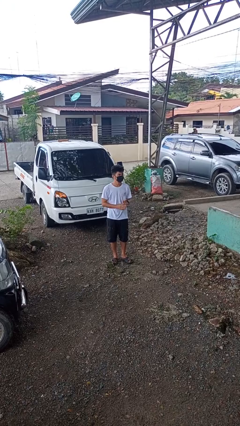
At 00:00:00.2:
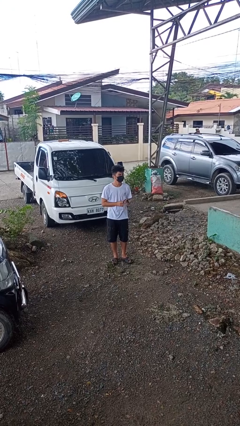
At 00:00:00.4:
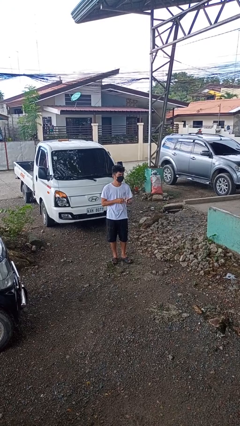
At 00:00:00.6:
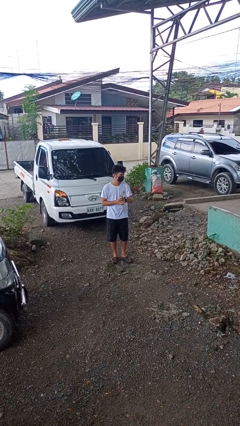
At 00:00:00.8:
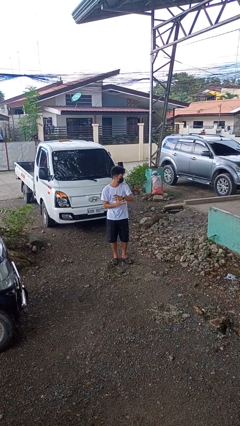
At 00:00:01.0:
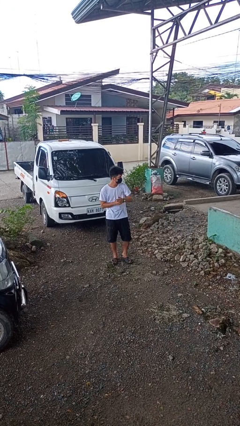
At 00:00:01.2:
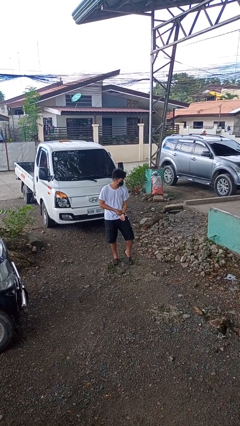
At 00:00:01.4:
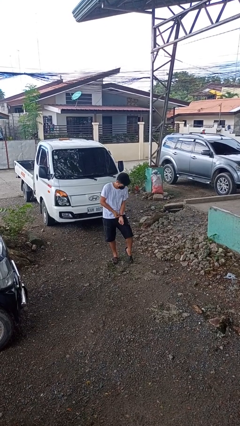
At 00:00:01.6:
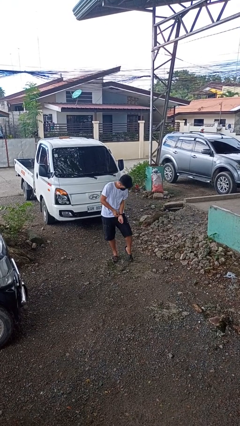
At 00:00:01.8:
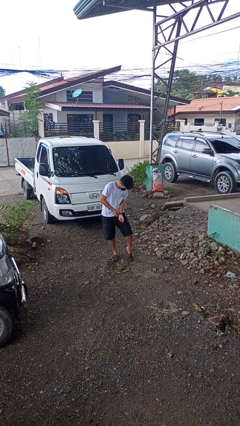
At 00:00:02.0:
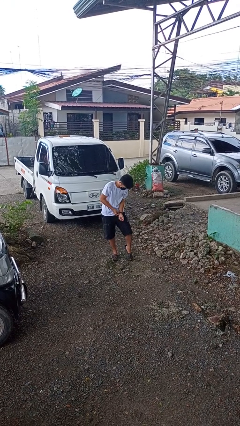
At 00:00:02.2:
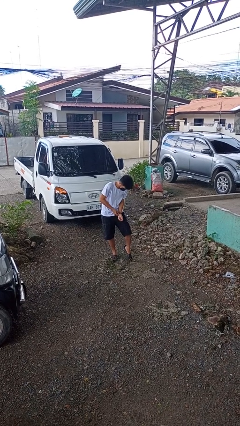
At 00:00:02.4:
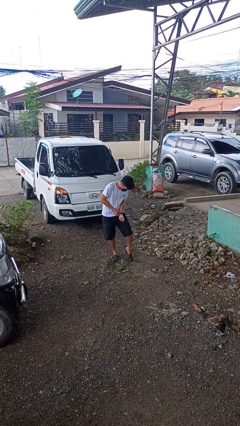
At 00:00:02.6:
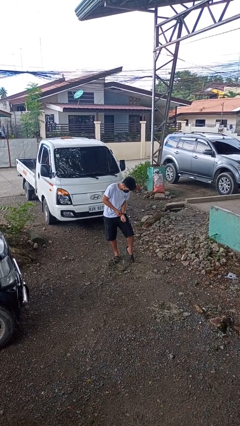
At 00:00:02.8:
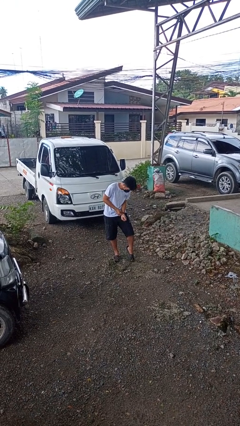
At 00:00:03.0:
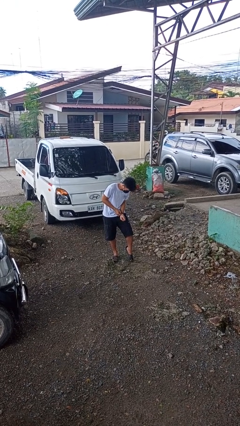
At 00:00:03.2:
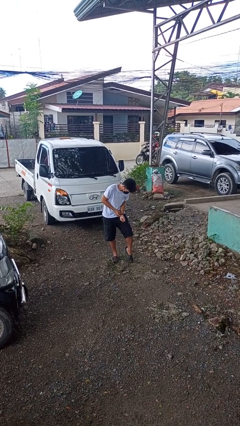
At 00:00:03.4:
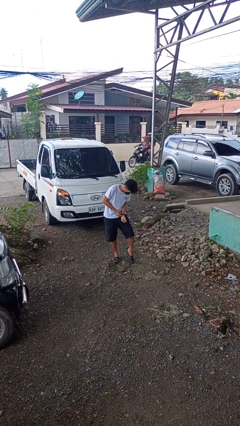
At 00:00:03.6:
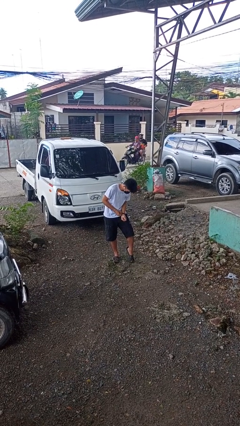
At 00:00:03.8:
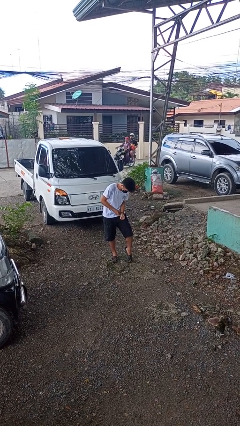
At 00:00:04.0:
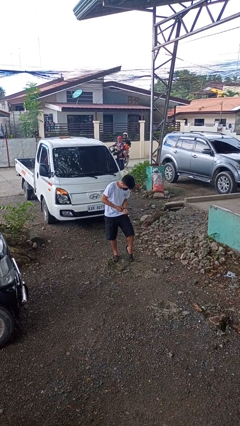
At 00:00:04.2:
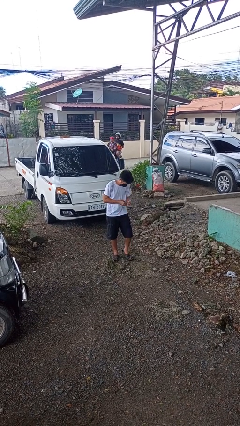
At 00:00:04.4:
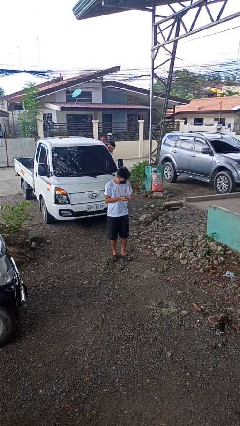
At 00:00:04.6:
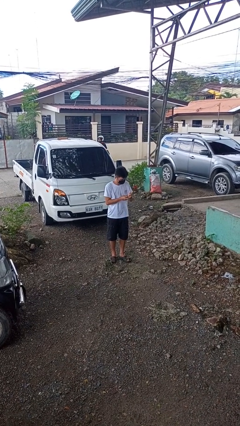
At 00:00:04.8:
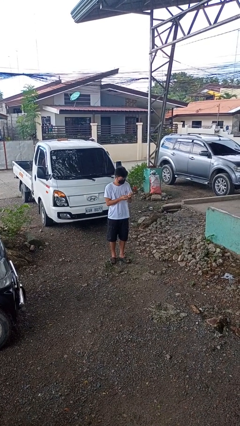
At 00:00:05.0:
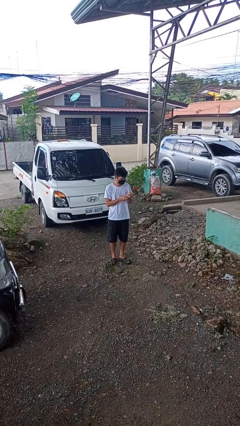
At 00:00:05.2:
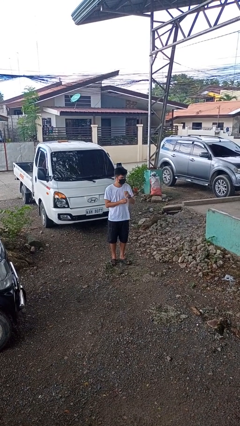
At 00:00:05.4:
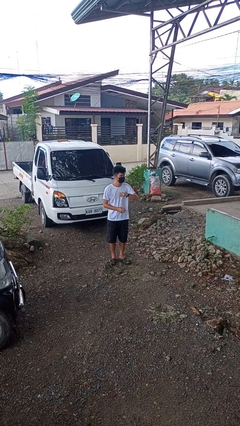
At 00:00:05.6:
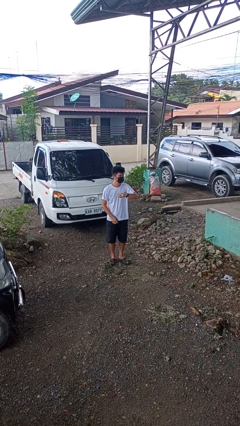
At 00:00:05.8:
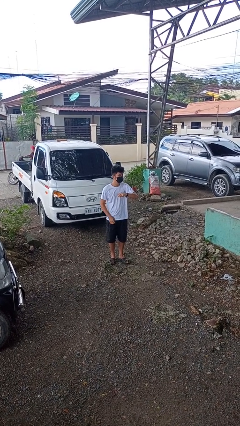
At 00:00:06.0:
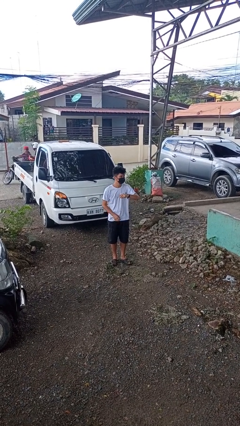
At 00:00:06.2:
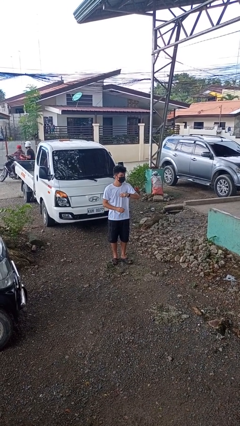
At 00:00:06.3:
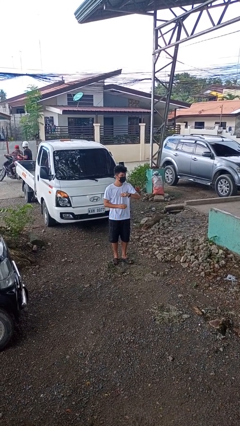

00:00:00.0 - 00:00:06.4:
person puts on wristwatch

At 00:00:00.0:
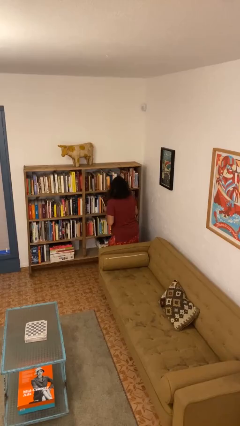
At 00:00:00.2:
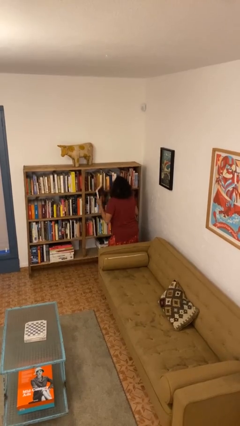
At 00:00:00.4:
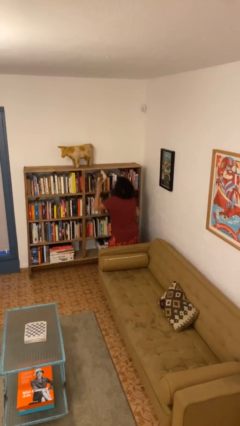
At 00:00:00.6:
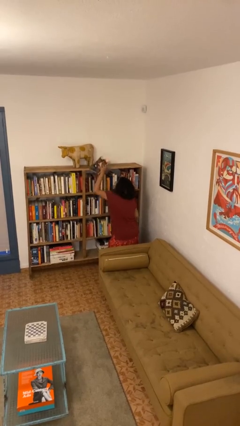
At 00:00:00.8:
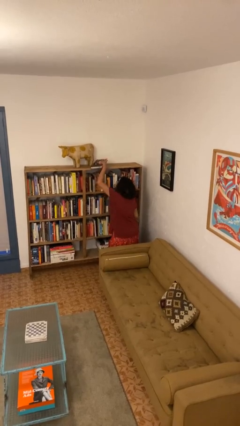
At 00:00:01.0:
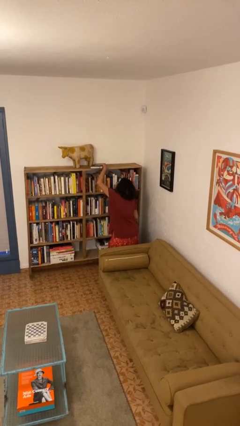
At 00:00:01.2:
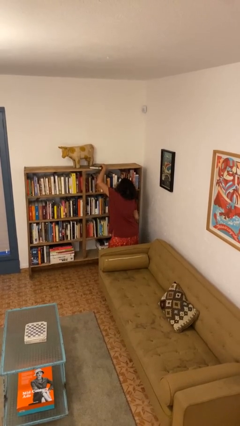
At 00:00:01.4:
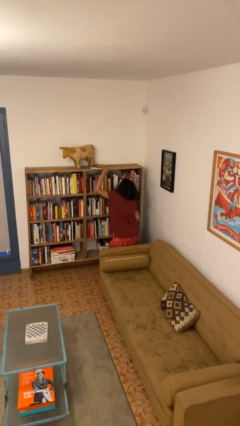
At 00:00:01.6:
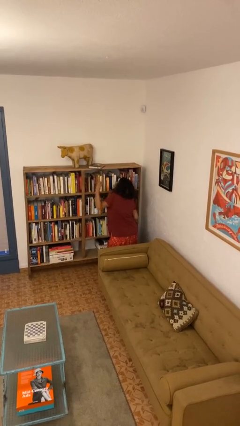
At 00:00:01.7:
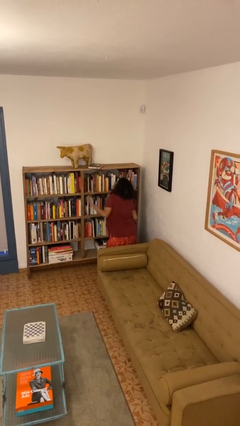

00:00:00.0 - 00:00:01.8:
person puts down object on shelf

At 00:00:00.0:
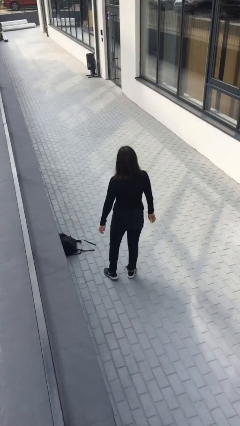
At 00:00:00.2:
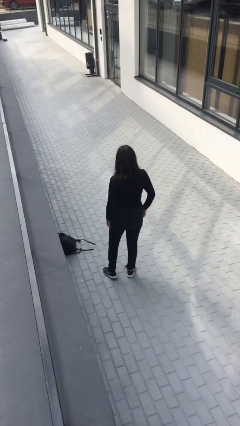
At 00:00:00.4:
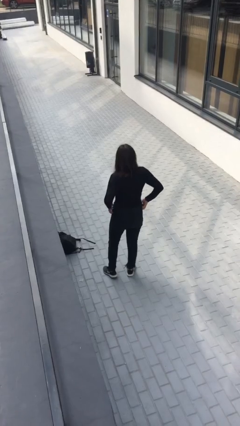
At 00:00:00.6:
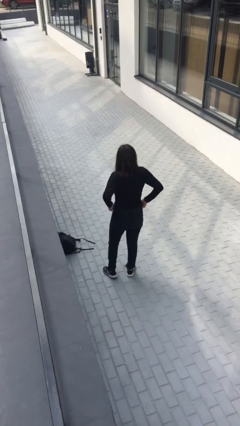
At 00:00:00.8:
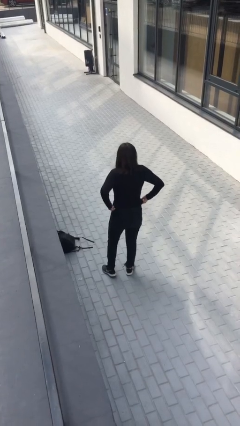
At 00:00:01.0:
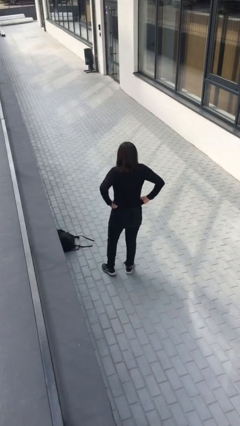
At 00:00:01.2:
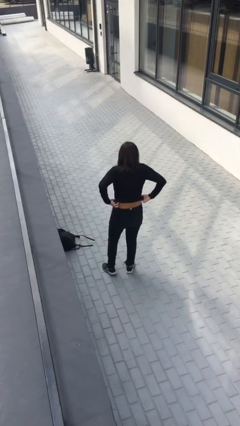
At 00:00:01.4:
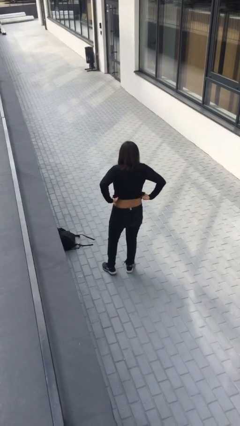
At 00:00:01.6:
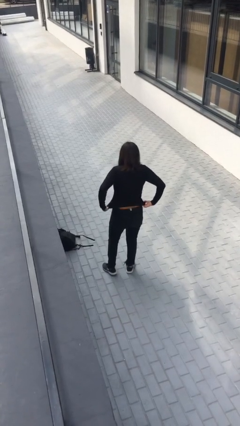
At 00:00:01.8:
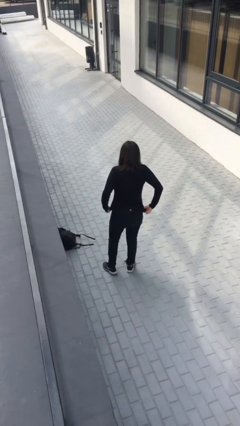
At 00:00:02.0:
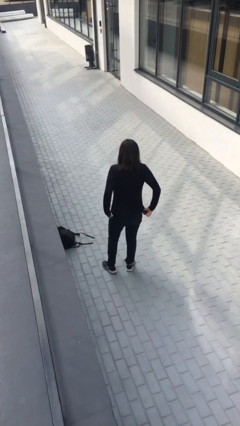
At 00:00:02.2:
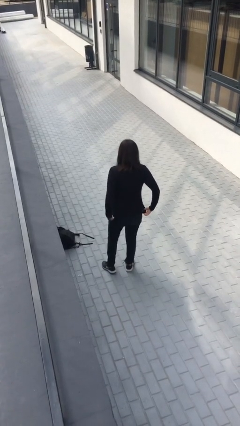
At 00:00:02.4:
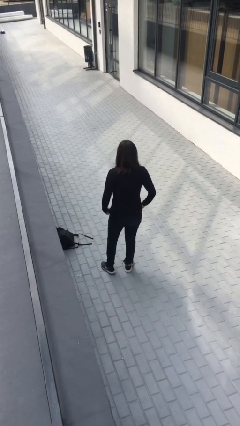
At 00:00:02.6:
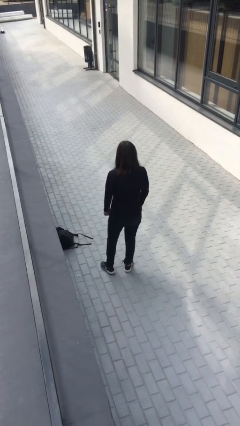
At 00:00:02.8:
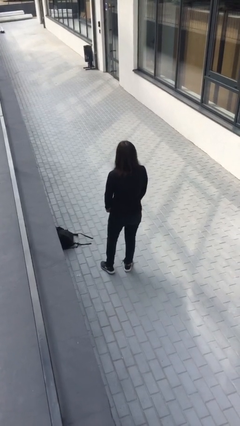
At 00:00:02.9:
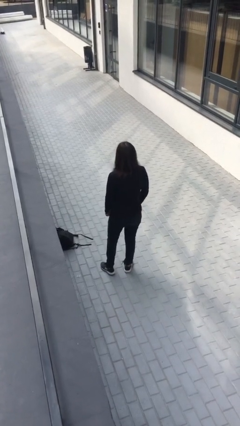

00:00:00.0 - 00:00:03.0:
person untucks shirt

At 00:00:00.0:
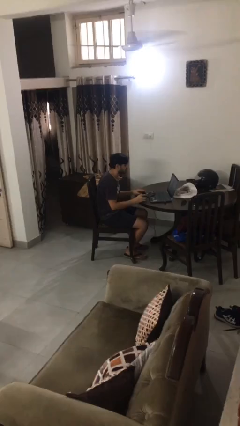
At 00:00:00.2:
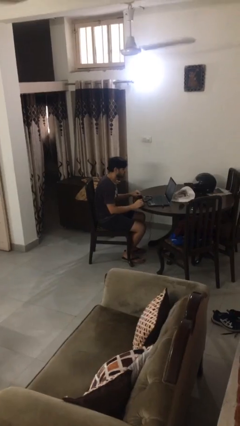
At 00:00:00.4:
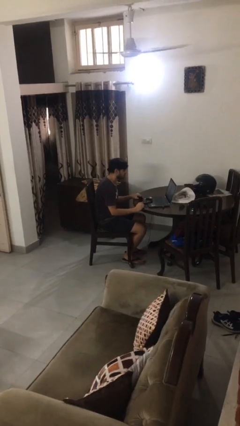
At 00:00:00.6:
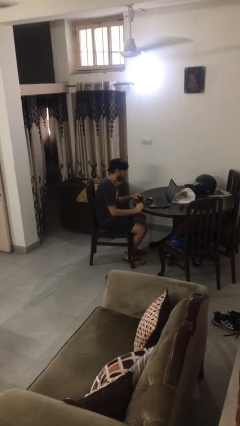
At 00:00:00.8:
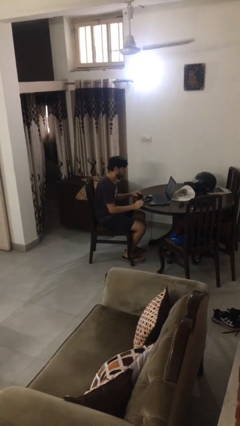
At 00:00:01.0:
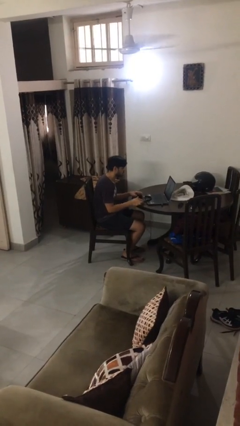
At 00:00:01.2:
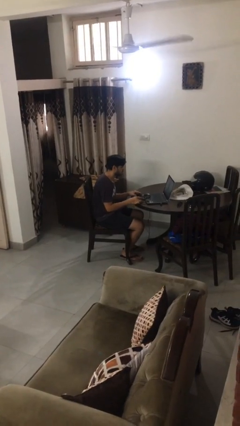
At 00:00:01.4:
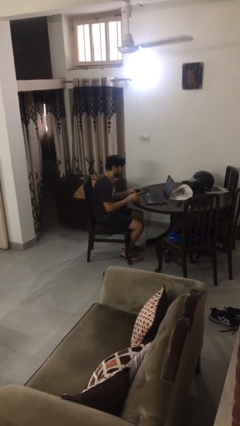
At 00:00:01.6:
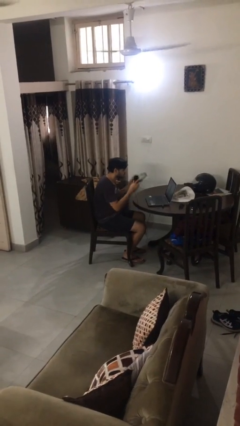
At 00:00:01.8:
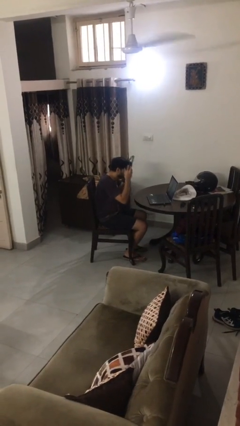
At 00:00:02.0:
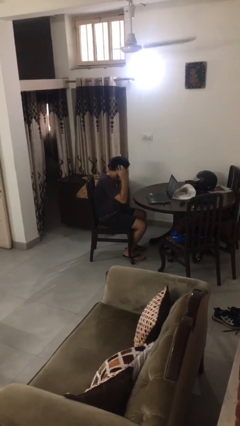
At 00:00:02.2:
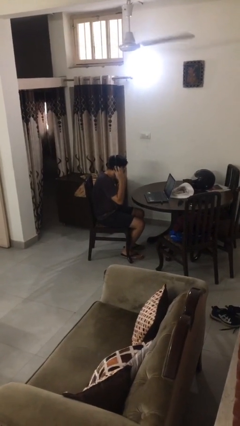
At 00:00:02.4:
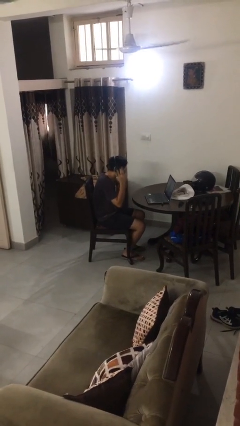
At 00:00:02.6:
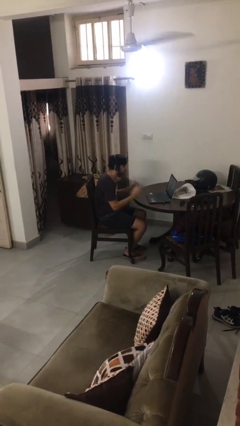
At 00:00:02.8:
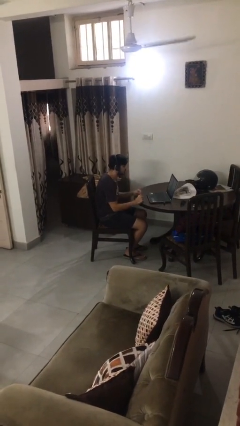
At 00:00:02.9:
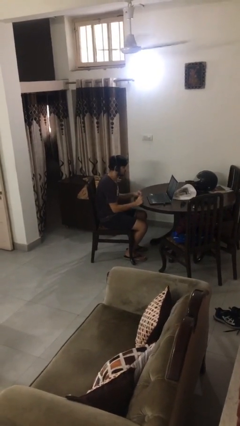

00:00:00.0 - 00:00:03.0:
person puts on headphones

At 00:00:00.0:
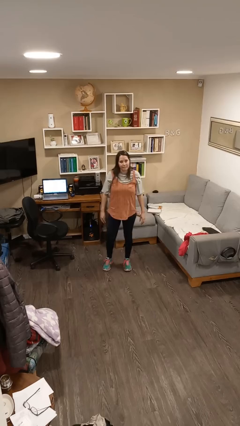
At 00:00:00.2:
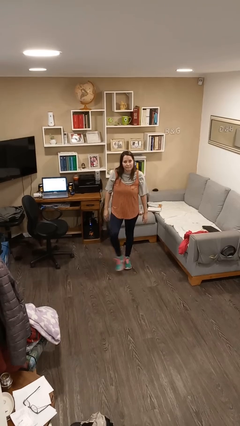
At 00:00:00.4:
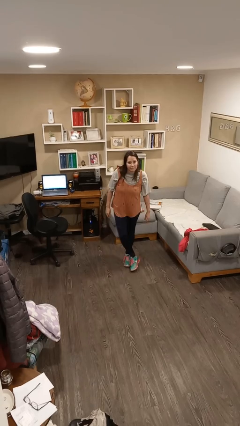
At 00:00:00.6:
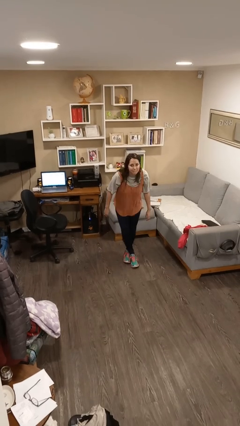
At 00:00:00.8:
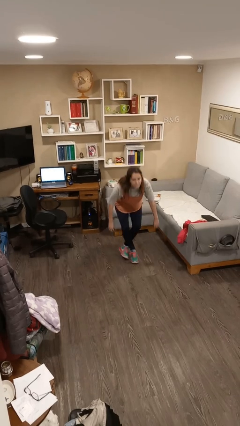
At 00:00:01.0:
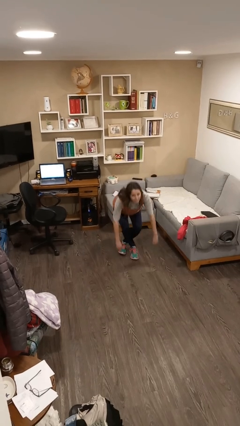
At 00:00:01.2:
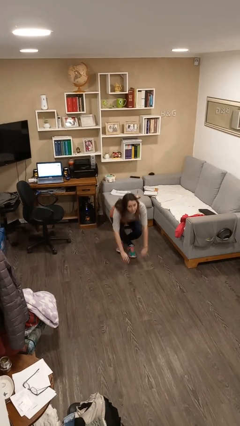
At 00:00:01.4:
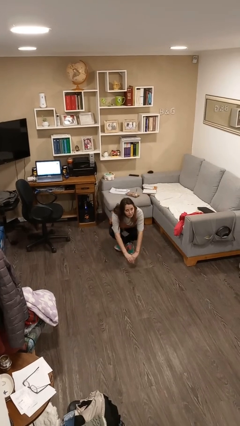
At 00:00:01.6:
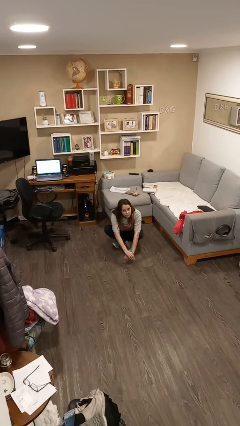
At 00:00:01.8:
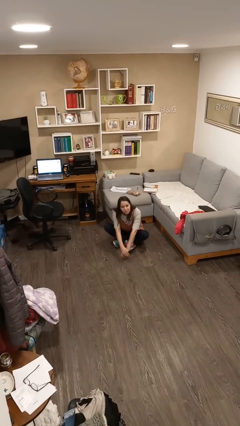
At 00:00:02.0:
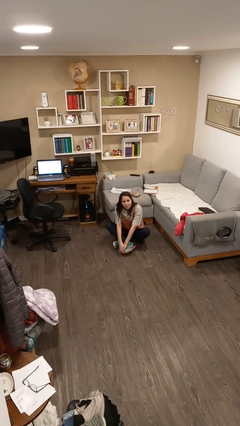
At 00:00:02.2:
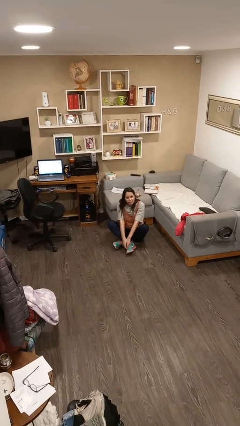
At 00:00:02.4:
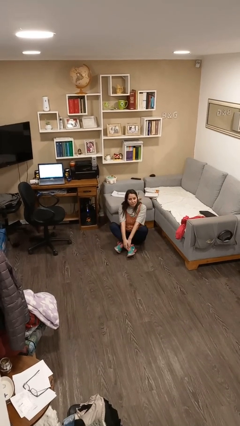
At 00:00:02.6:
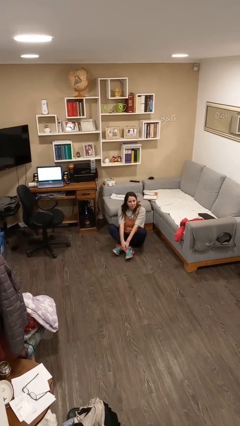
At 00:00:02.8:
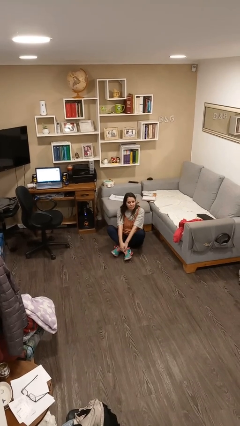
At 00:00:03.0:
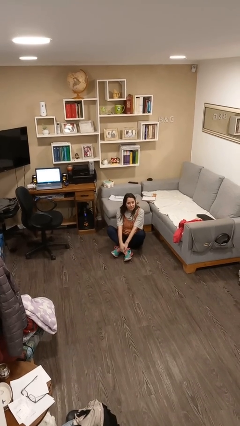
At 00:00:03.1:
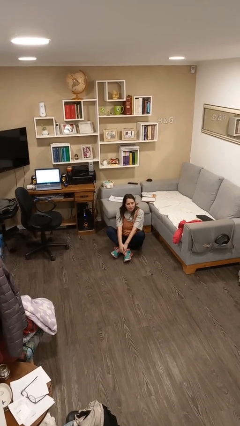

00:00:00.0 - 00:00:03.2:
person sits crisscross

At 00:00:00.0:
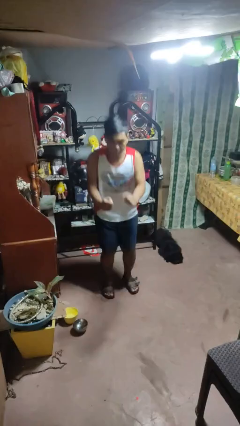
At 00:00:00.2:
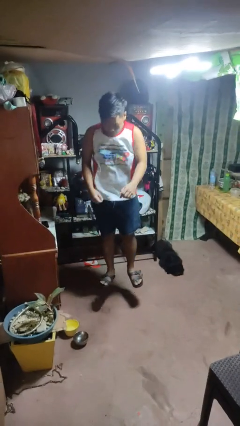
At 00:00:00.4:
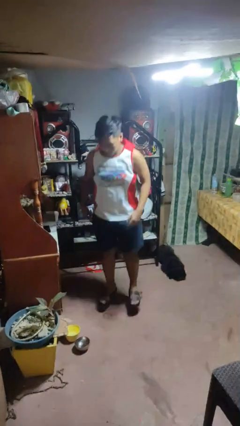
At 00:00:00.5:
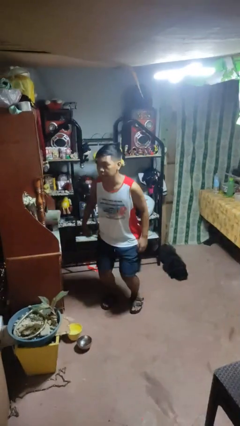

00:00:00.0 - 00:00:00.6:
person jumps
